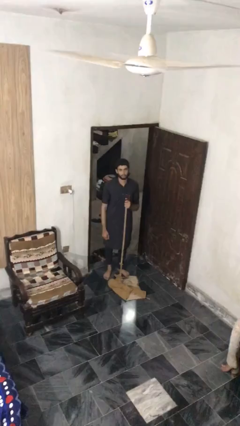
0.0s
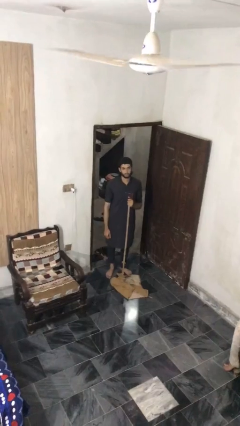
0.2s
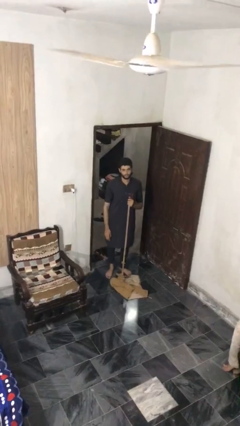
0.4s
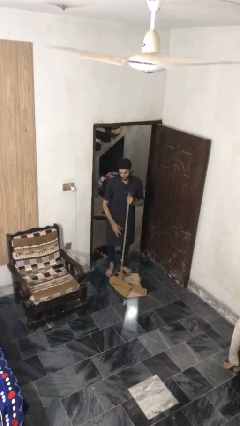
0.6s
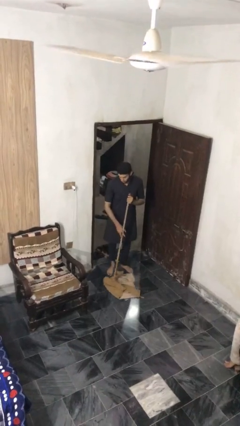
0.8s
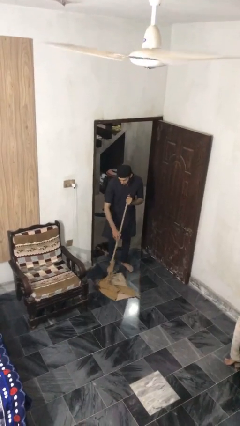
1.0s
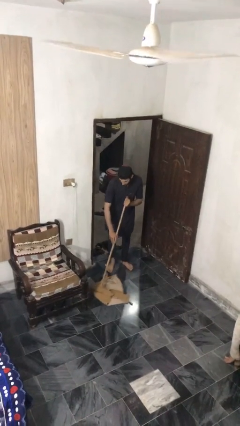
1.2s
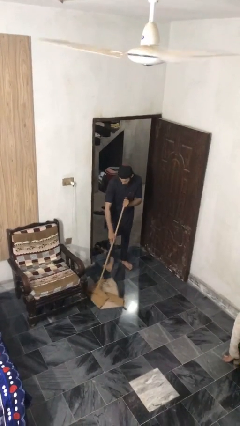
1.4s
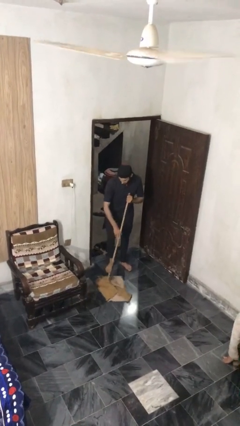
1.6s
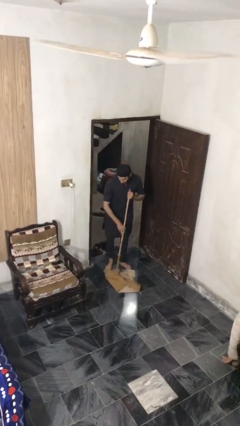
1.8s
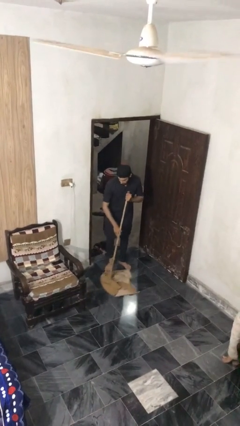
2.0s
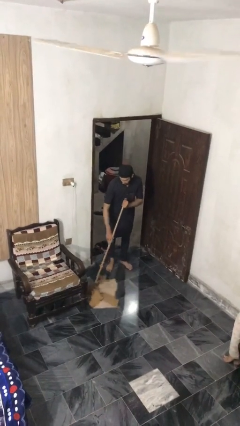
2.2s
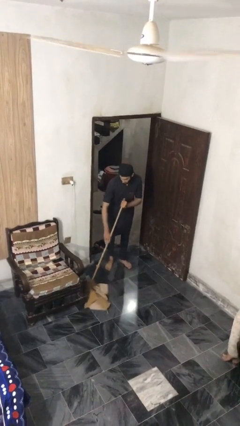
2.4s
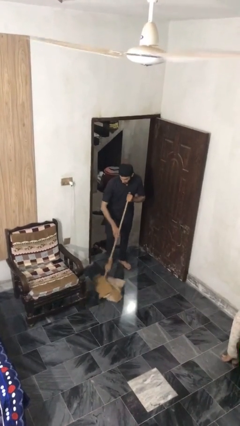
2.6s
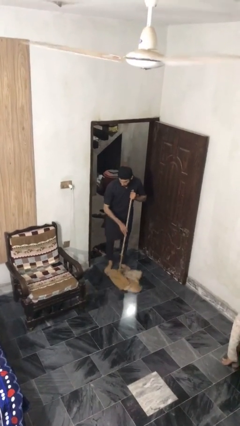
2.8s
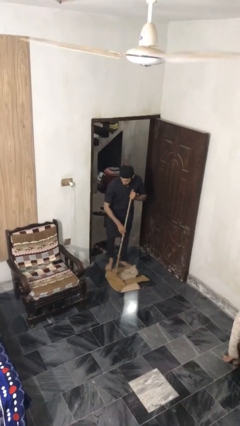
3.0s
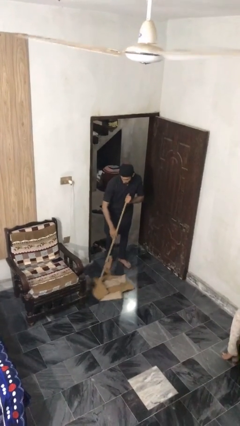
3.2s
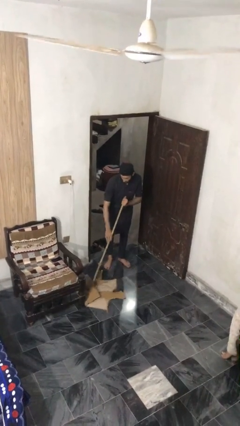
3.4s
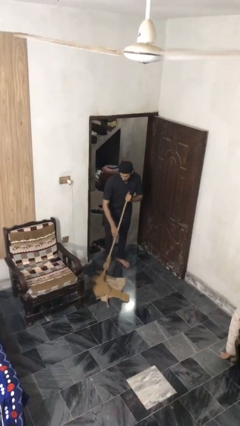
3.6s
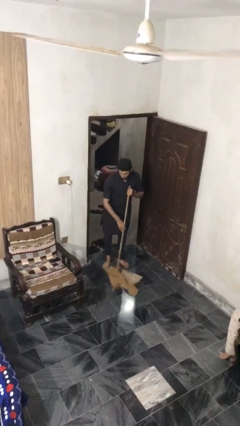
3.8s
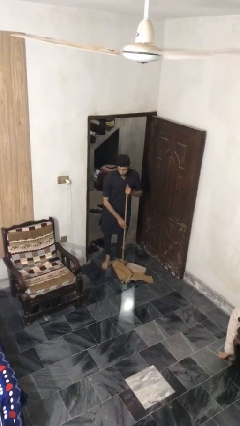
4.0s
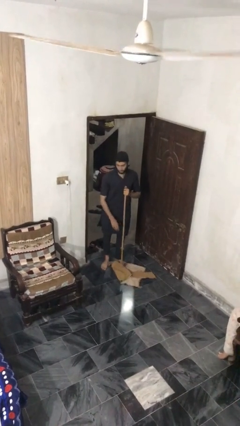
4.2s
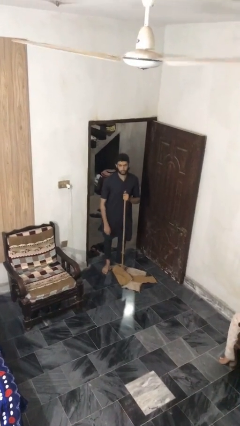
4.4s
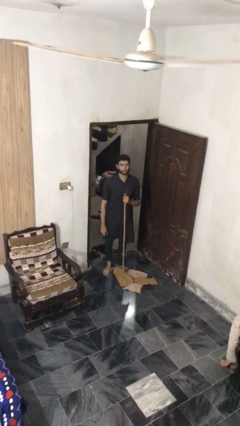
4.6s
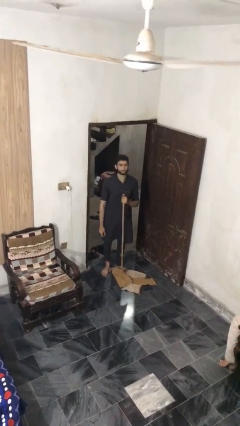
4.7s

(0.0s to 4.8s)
person mops

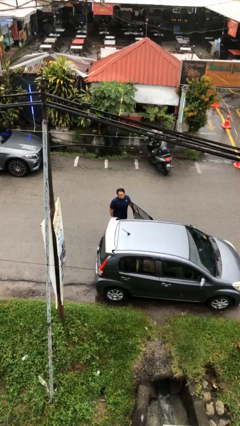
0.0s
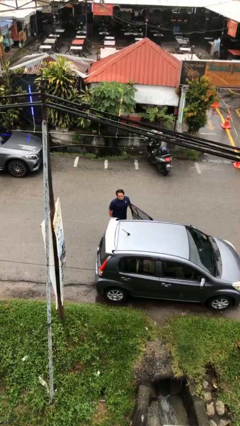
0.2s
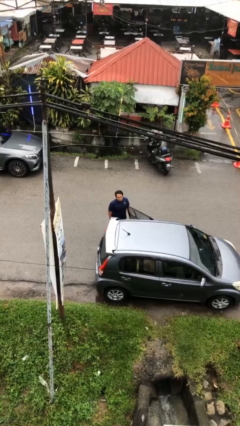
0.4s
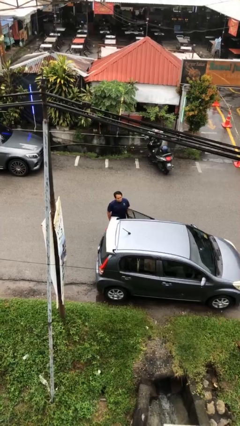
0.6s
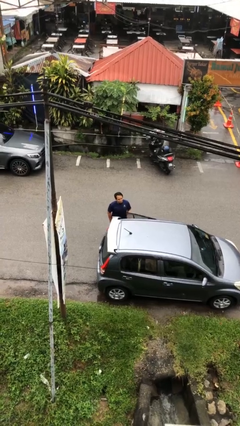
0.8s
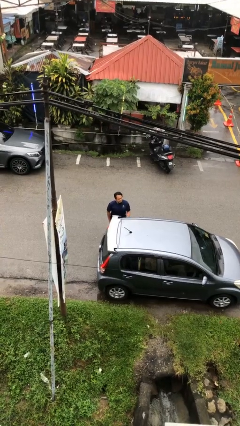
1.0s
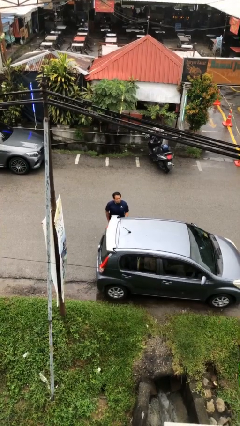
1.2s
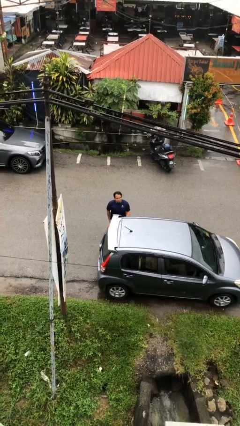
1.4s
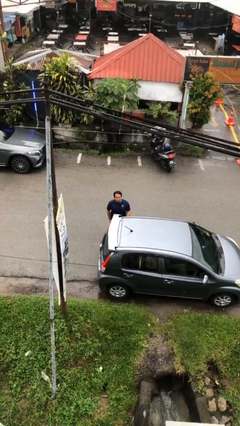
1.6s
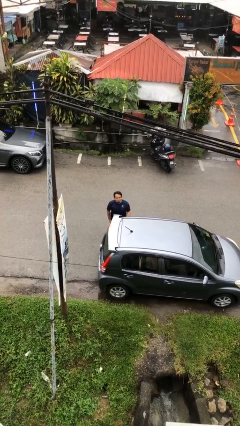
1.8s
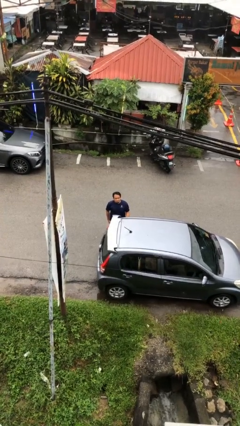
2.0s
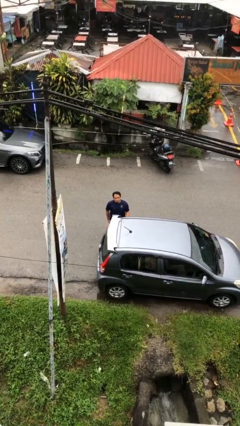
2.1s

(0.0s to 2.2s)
person closes car door

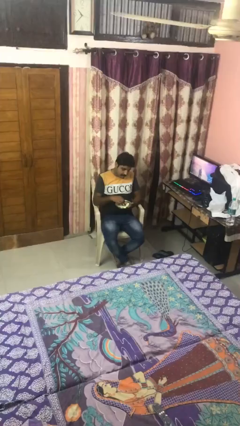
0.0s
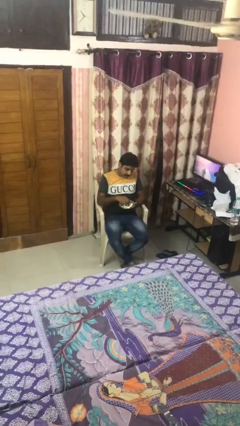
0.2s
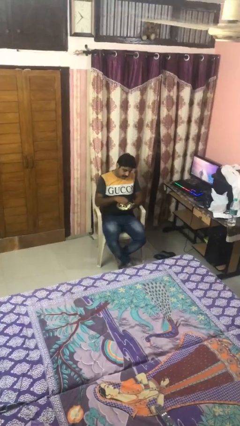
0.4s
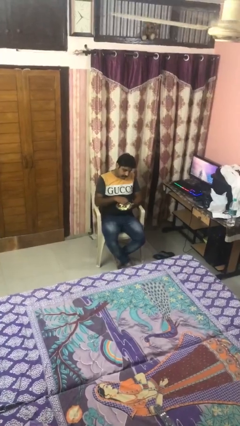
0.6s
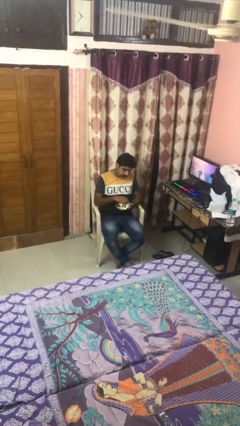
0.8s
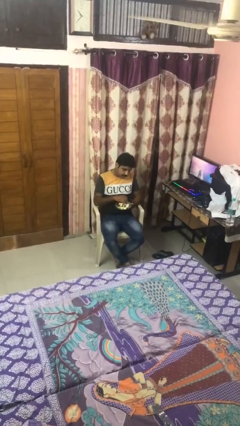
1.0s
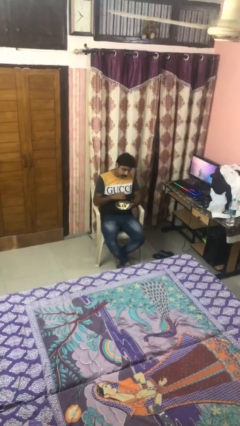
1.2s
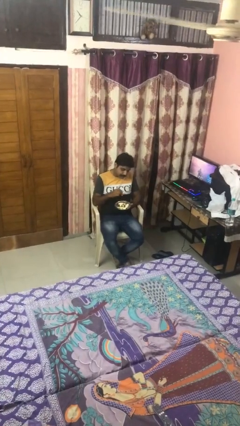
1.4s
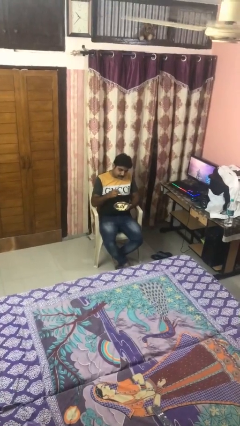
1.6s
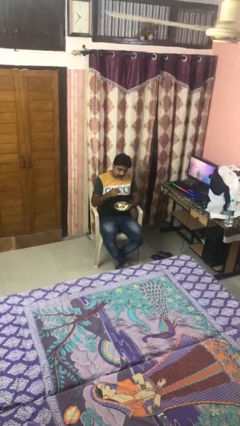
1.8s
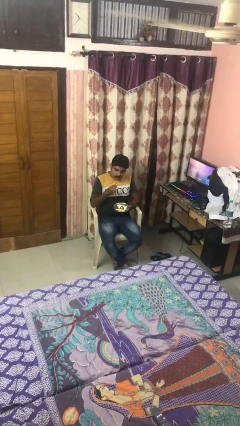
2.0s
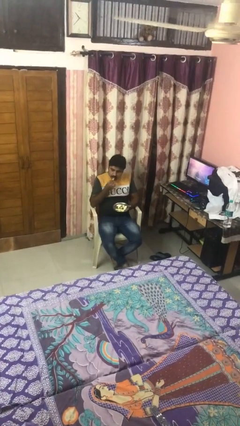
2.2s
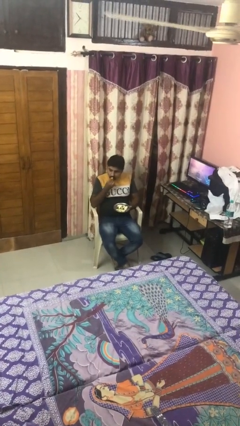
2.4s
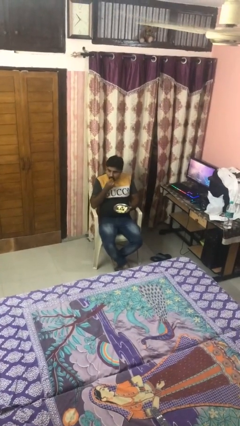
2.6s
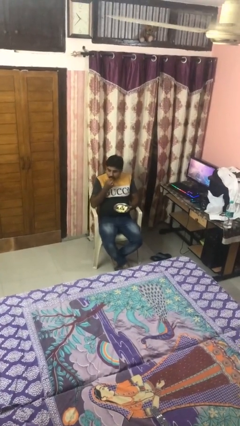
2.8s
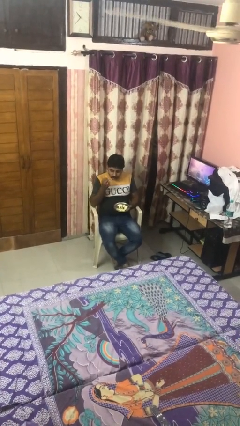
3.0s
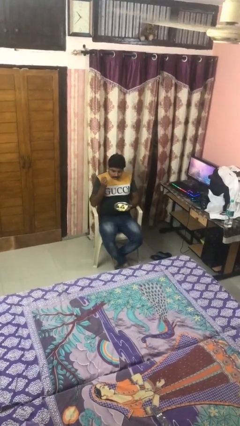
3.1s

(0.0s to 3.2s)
person eats with hands

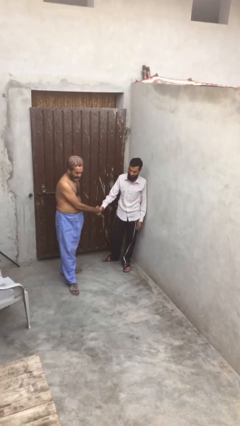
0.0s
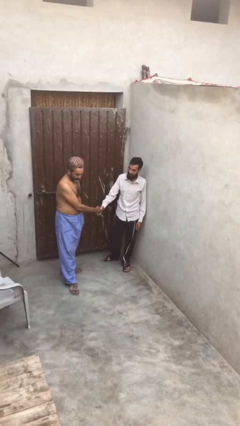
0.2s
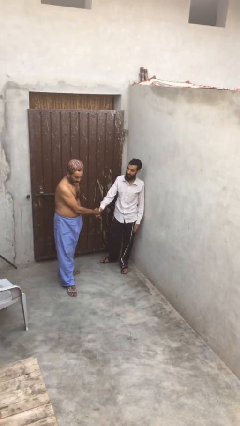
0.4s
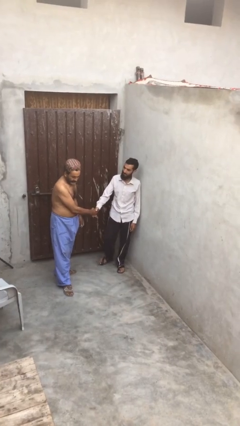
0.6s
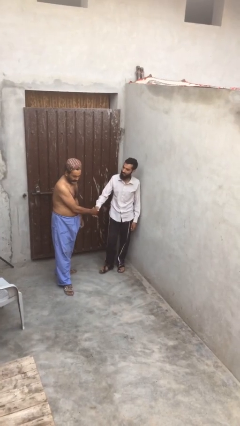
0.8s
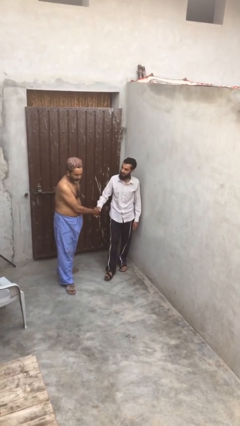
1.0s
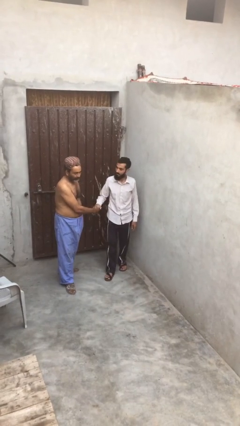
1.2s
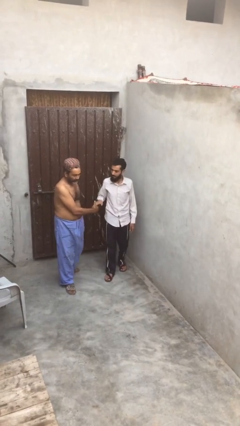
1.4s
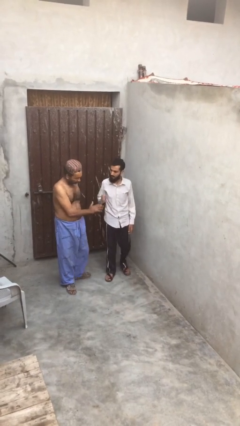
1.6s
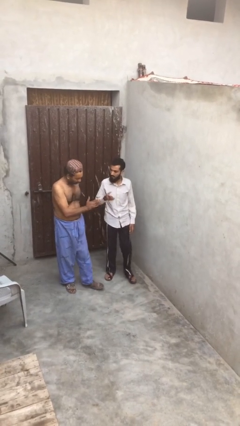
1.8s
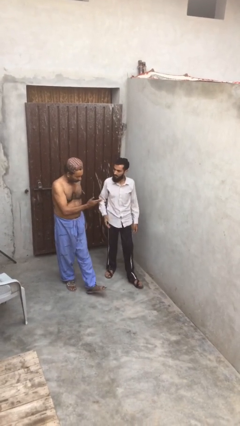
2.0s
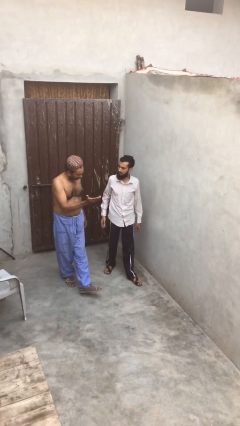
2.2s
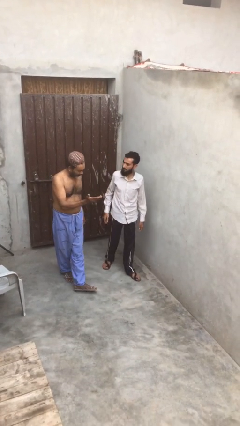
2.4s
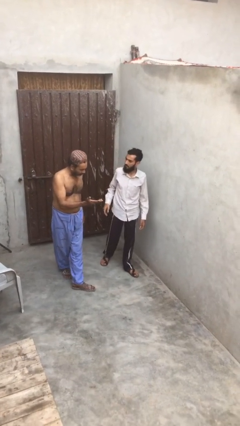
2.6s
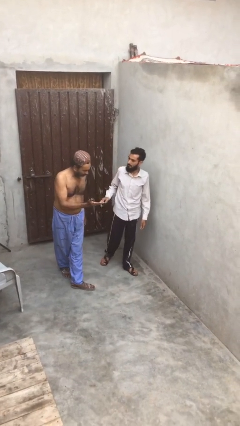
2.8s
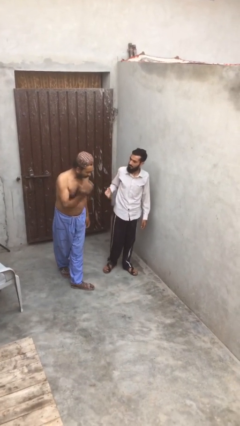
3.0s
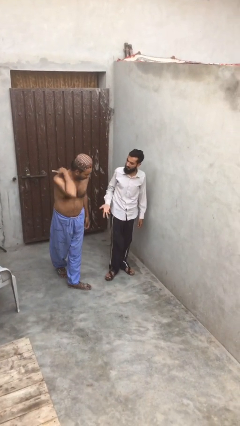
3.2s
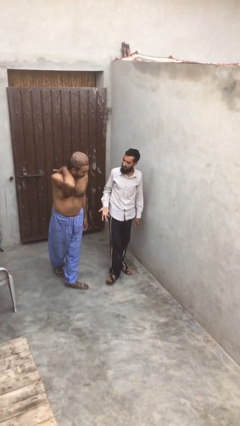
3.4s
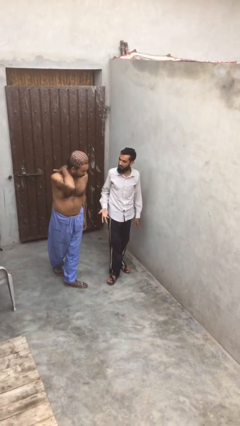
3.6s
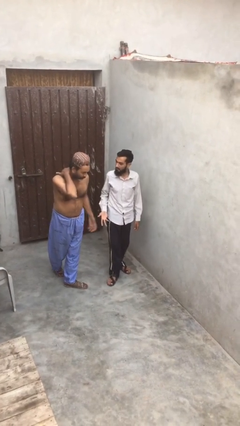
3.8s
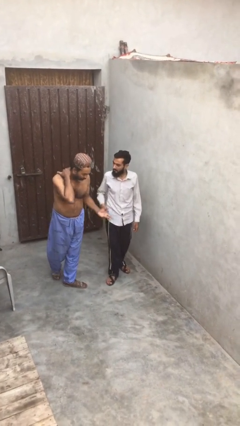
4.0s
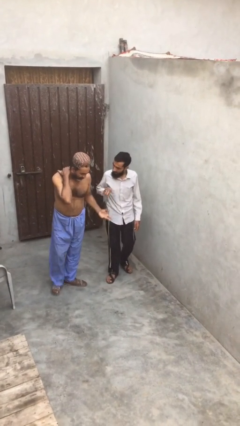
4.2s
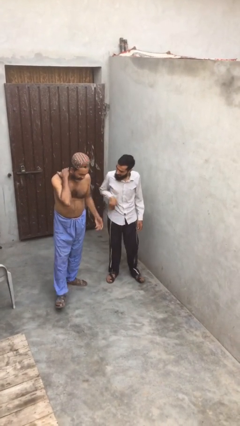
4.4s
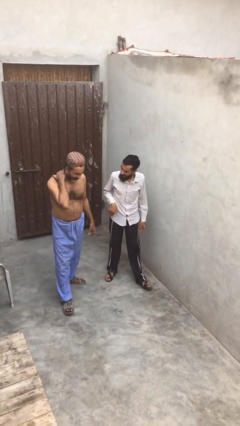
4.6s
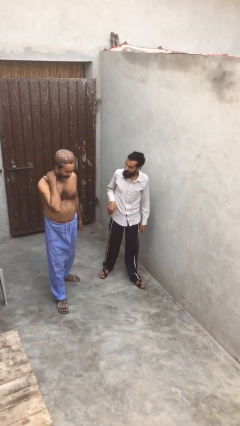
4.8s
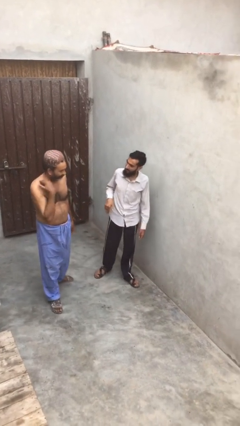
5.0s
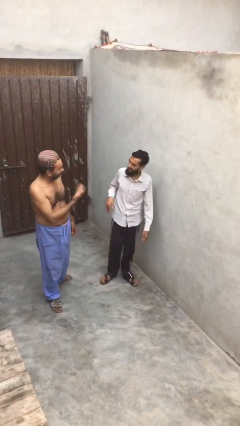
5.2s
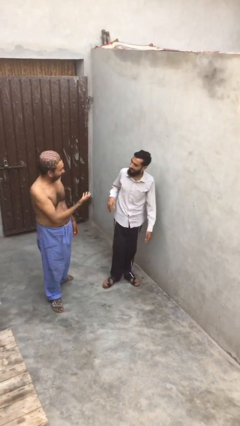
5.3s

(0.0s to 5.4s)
person talks to person

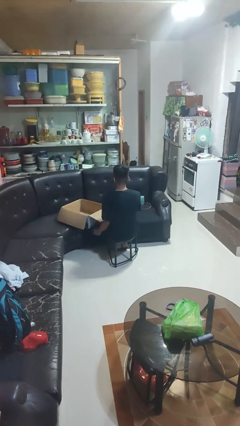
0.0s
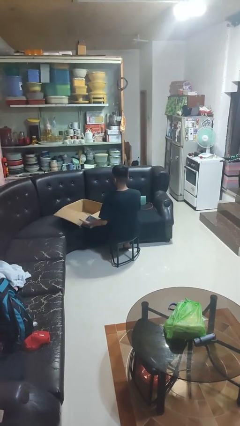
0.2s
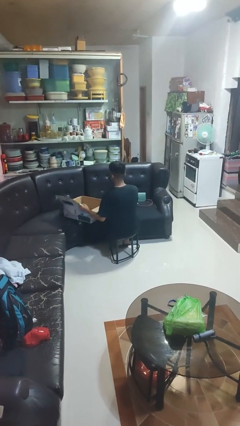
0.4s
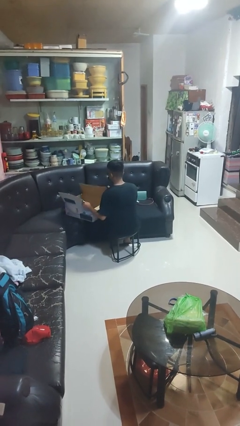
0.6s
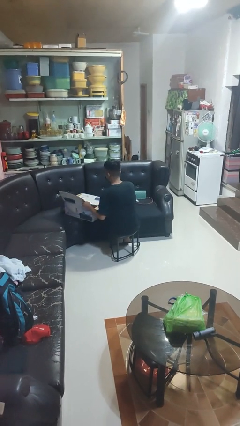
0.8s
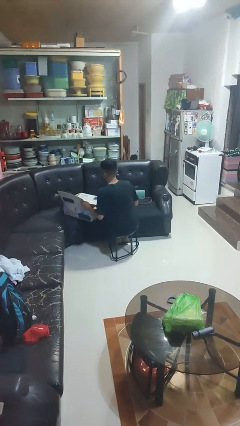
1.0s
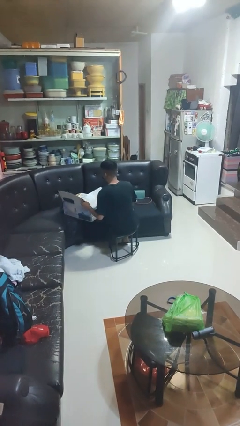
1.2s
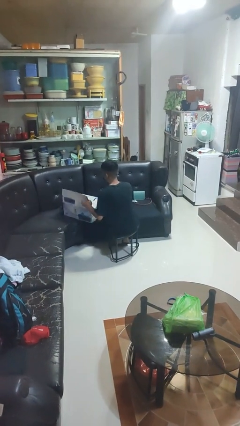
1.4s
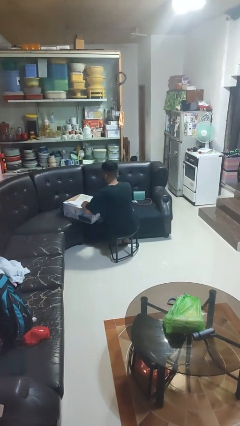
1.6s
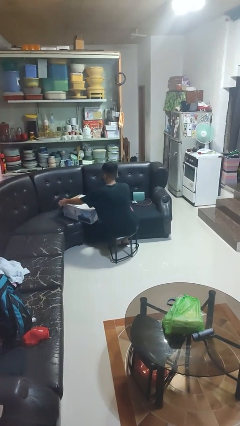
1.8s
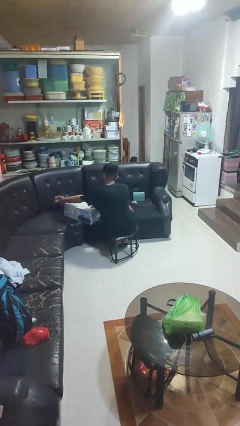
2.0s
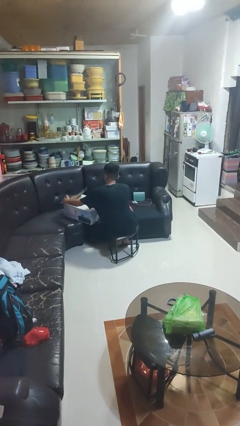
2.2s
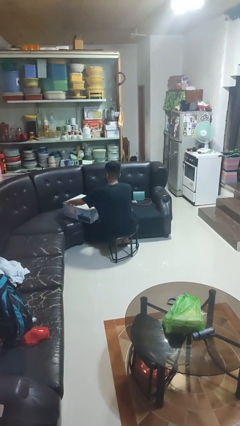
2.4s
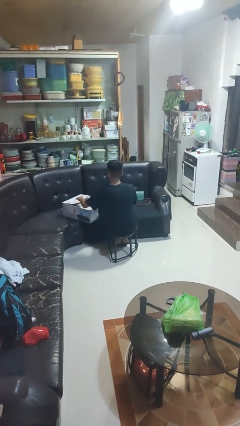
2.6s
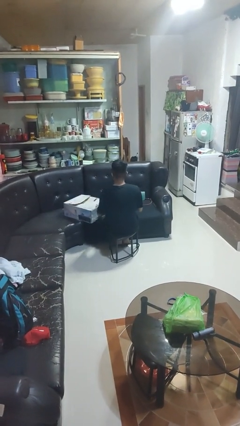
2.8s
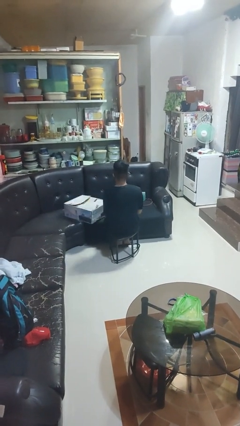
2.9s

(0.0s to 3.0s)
person closes box
